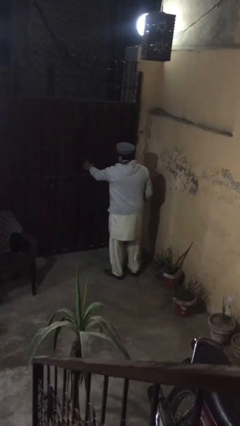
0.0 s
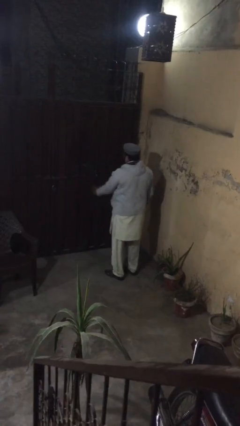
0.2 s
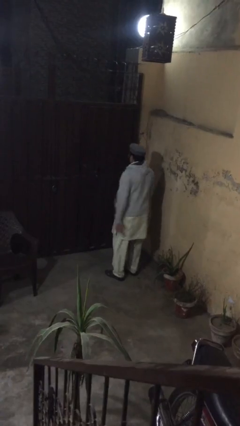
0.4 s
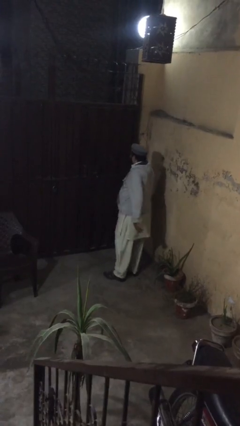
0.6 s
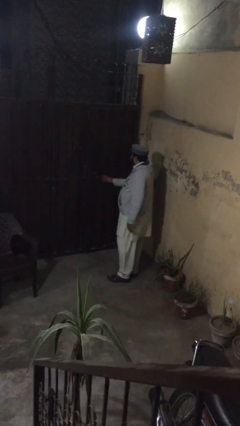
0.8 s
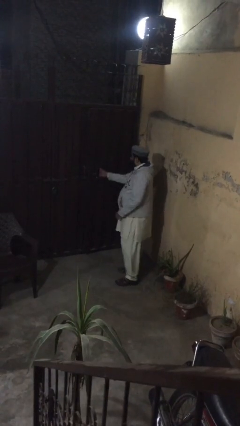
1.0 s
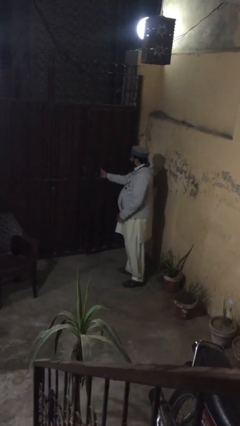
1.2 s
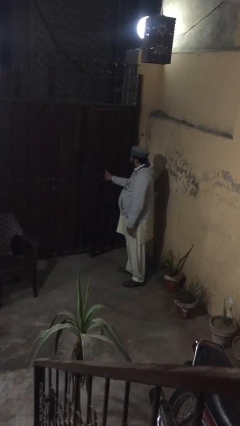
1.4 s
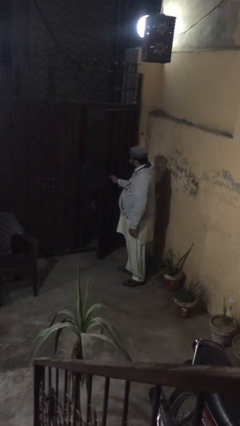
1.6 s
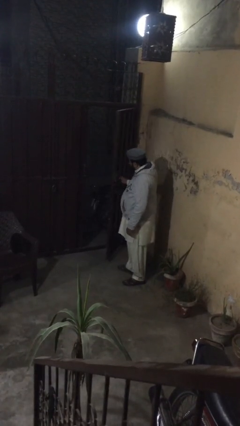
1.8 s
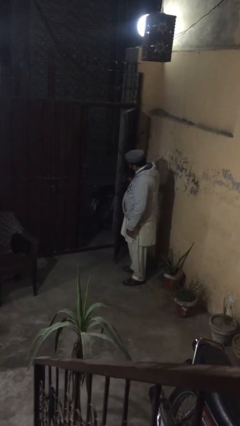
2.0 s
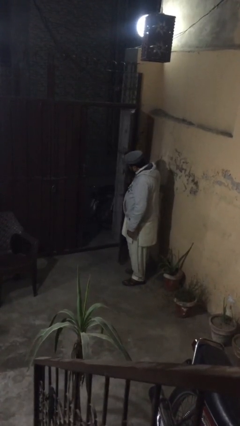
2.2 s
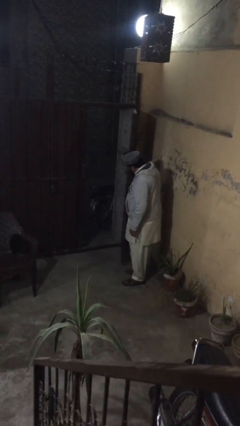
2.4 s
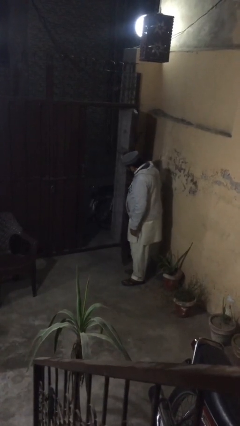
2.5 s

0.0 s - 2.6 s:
person opens facility door

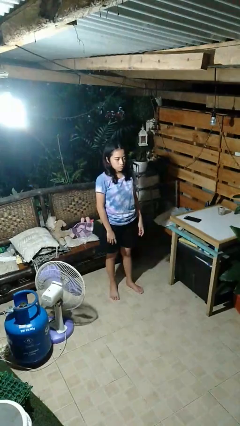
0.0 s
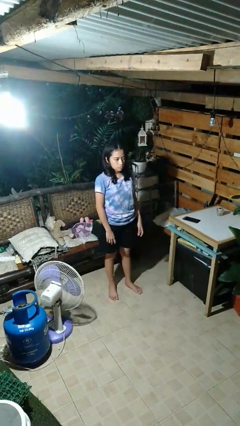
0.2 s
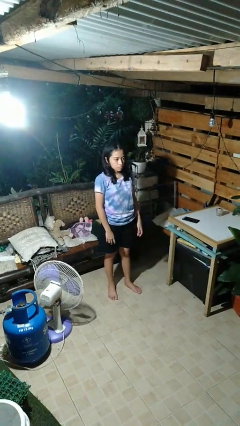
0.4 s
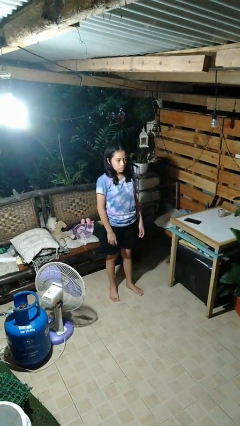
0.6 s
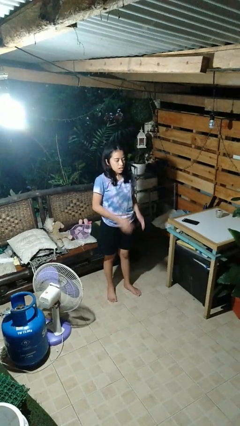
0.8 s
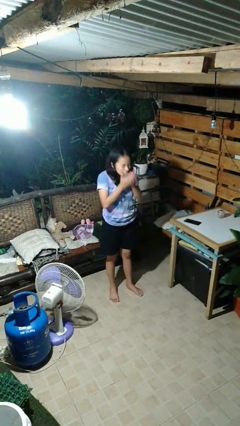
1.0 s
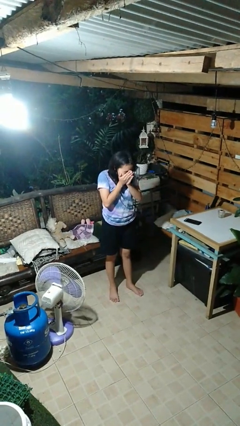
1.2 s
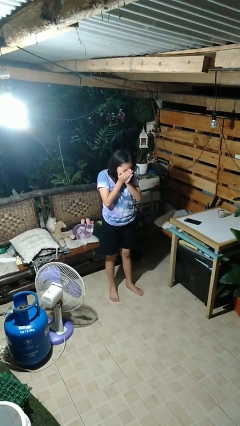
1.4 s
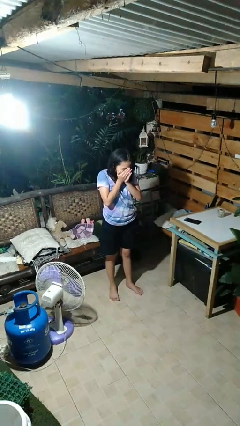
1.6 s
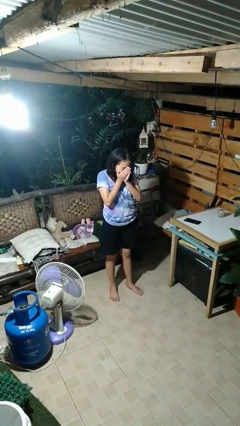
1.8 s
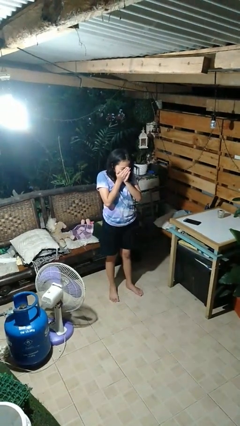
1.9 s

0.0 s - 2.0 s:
person sneezes into hand

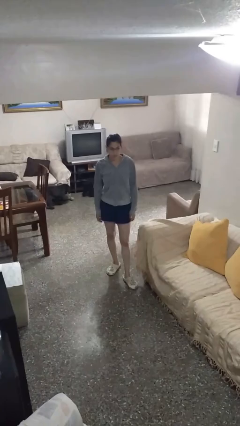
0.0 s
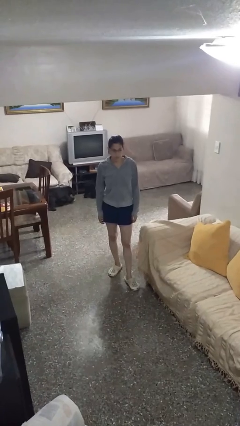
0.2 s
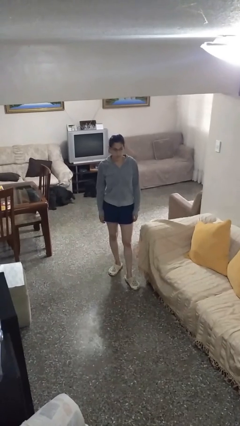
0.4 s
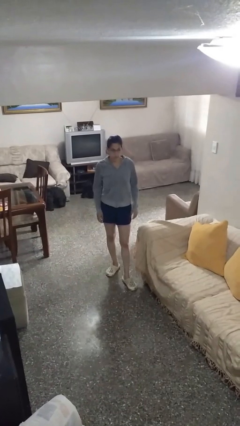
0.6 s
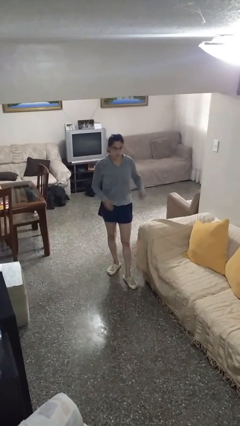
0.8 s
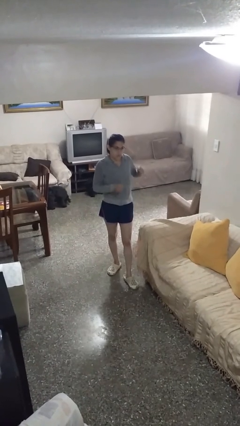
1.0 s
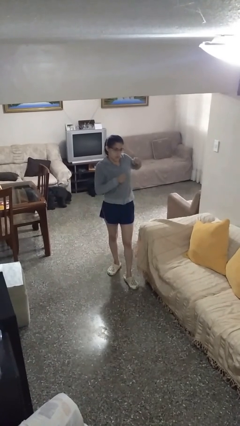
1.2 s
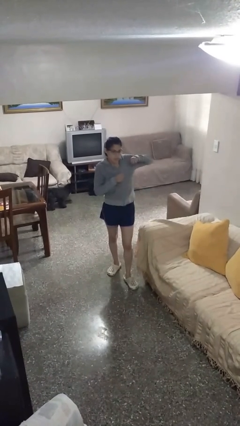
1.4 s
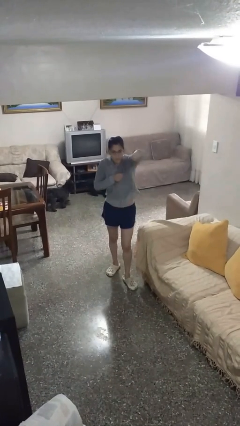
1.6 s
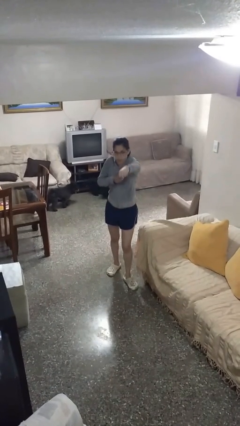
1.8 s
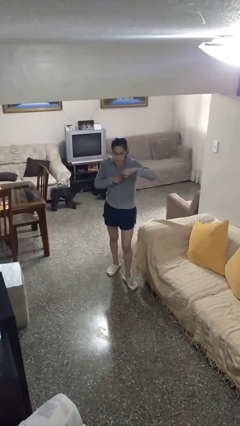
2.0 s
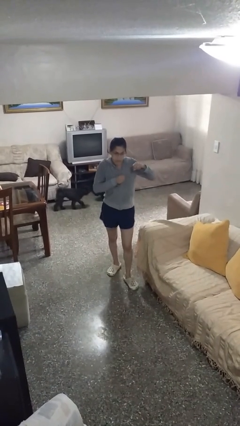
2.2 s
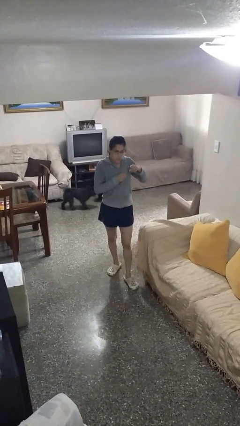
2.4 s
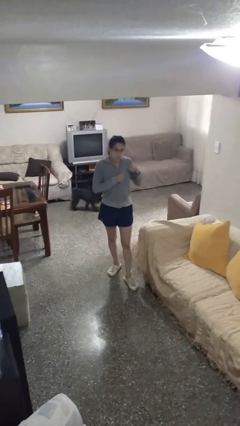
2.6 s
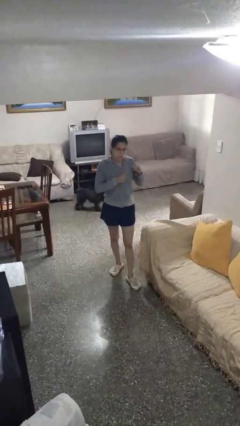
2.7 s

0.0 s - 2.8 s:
person punches

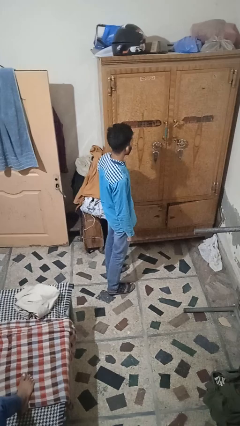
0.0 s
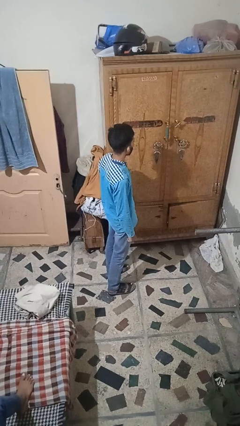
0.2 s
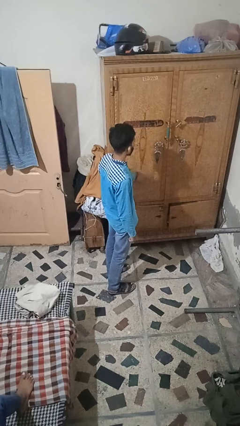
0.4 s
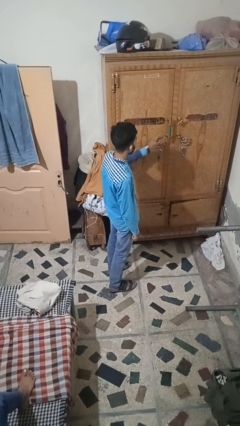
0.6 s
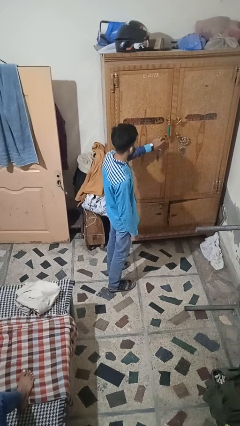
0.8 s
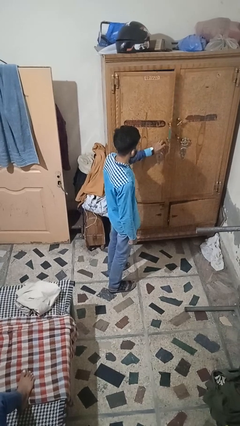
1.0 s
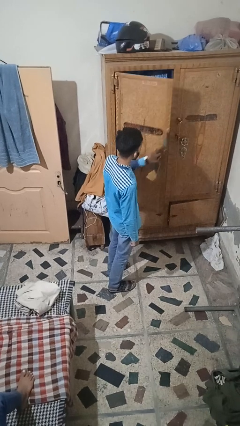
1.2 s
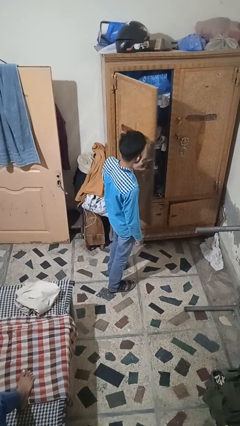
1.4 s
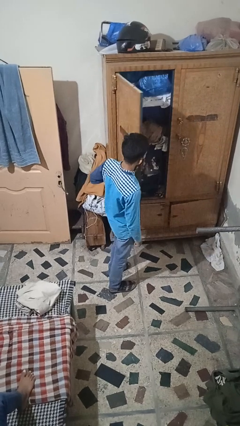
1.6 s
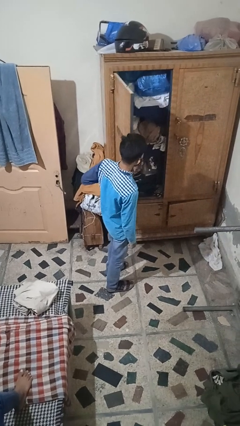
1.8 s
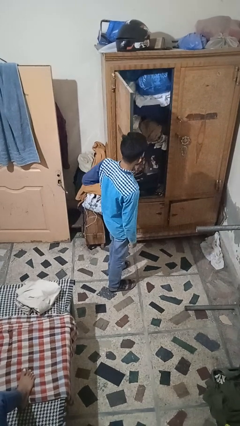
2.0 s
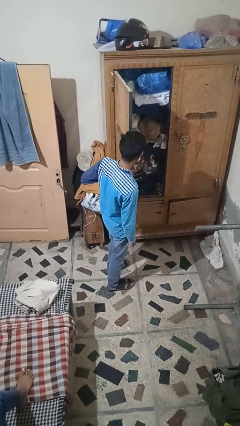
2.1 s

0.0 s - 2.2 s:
person opens closet door

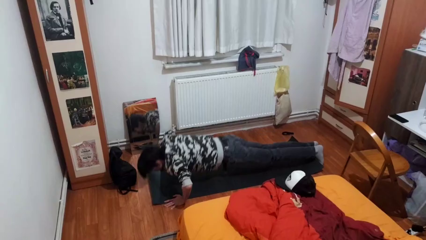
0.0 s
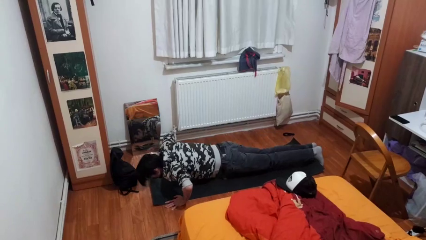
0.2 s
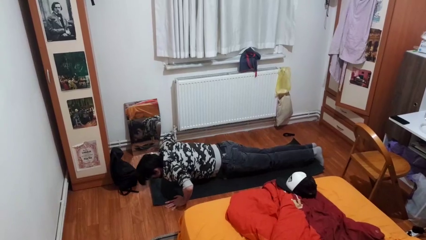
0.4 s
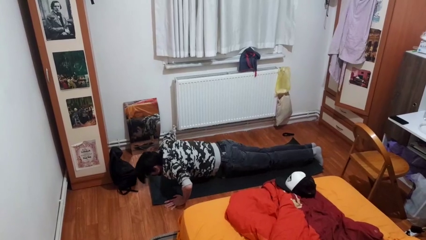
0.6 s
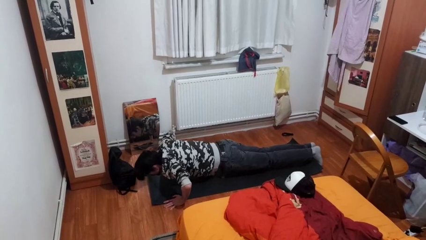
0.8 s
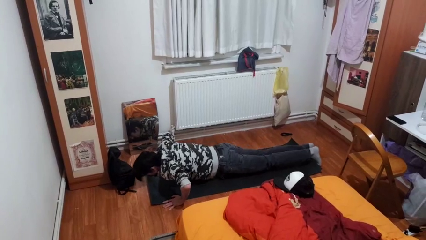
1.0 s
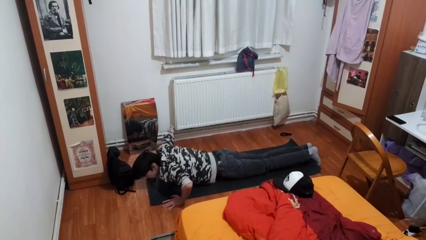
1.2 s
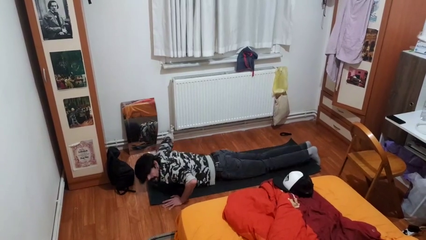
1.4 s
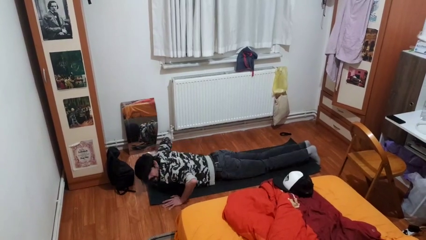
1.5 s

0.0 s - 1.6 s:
person exercises with pushup

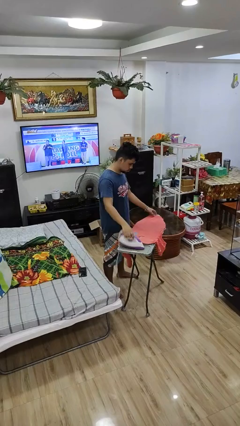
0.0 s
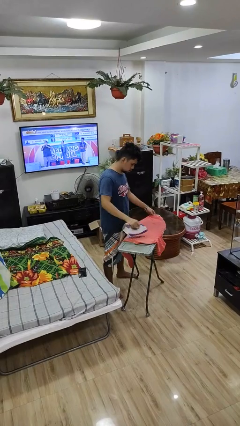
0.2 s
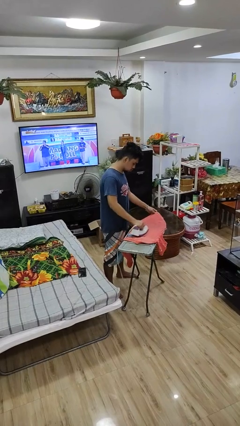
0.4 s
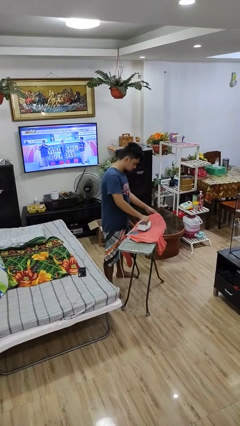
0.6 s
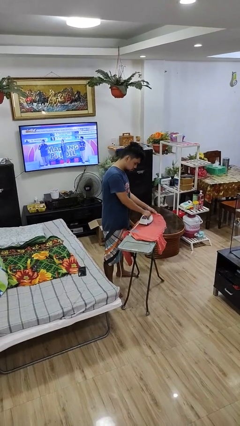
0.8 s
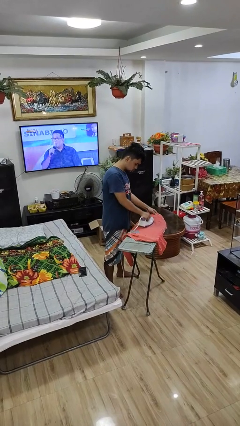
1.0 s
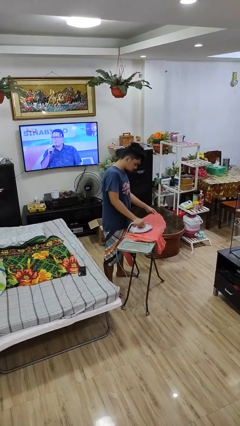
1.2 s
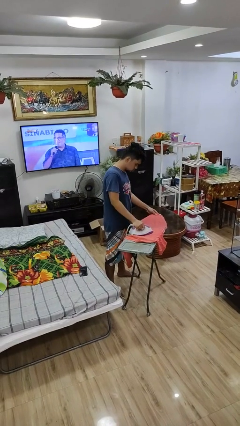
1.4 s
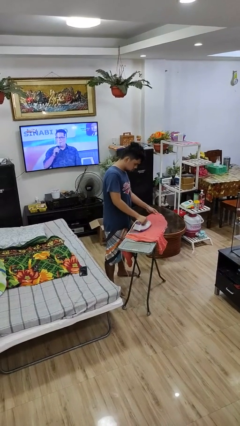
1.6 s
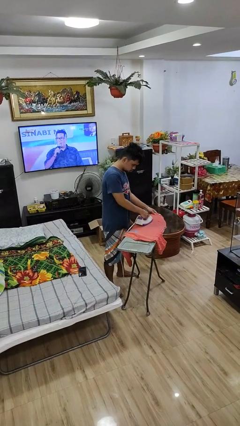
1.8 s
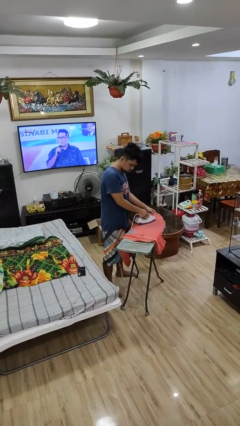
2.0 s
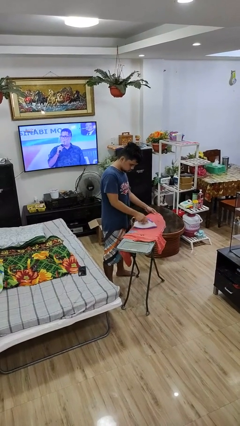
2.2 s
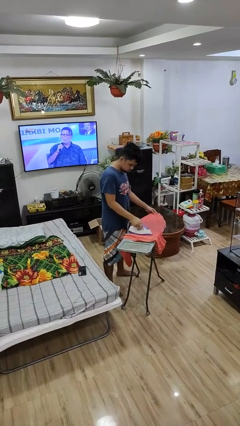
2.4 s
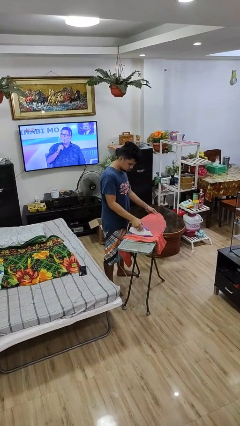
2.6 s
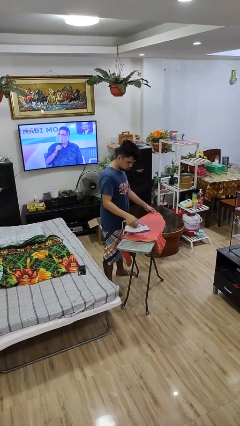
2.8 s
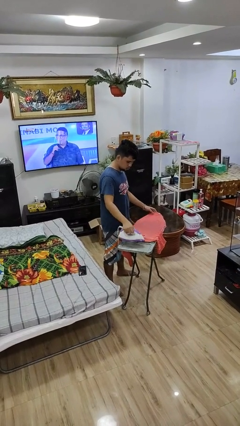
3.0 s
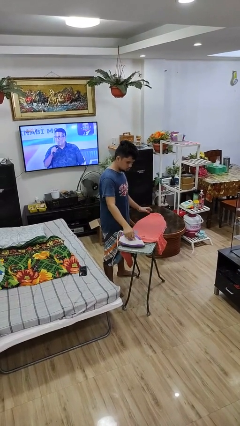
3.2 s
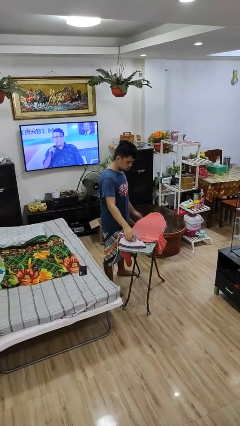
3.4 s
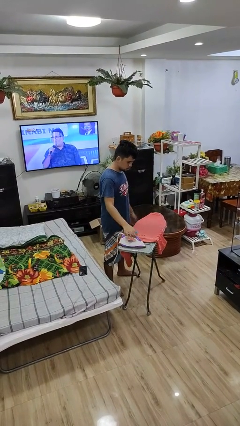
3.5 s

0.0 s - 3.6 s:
person irons clothes

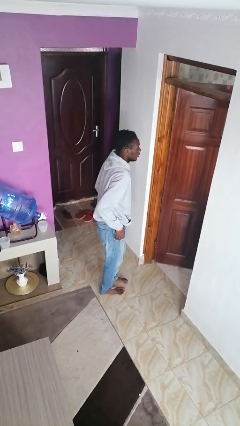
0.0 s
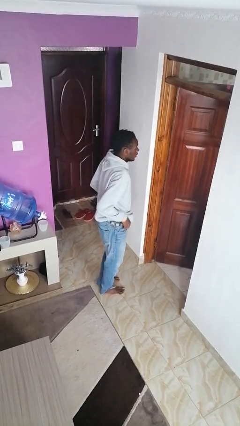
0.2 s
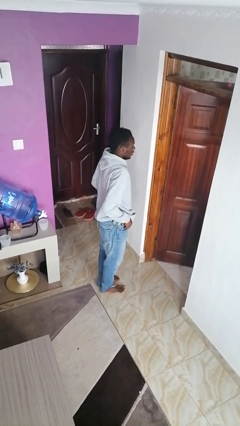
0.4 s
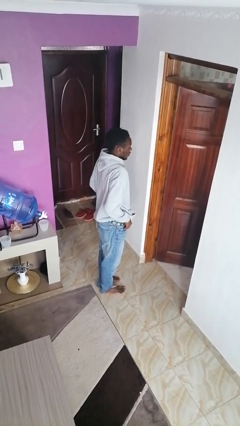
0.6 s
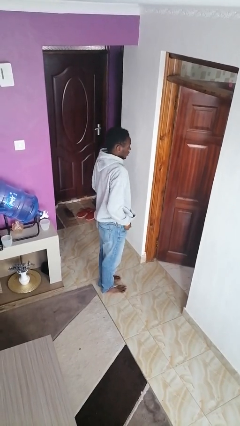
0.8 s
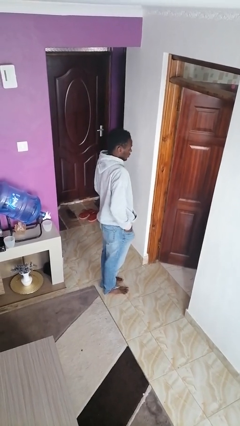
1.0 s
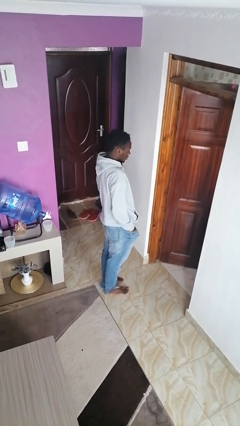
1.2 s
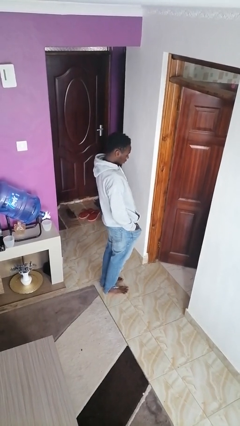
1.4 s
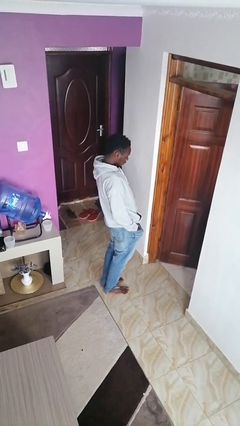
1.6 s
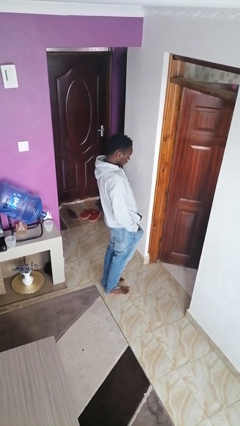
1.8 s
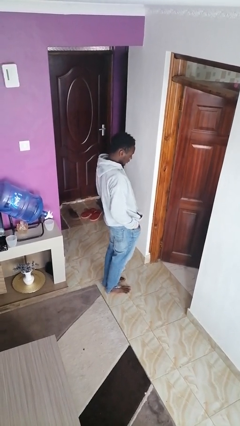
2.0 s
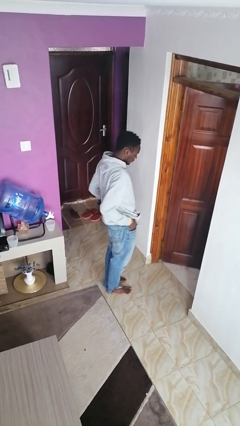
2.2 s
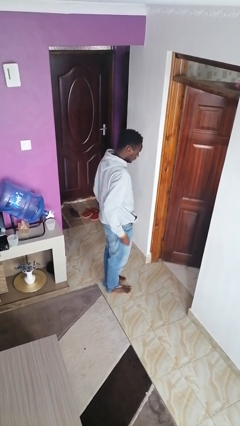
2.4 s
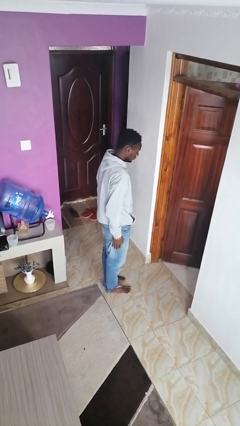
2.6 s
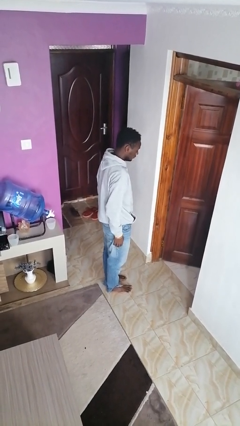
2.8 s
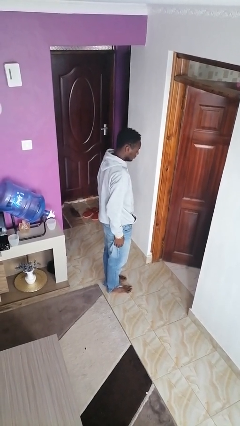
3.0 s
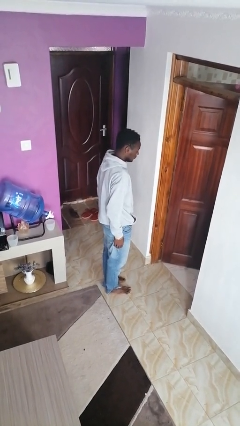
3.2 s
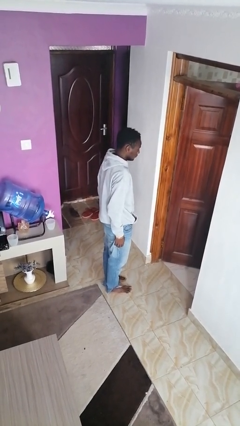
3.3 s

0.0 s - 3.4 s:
person puts hands in back pockets
